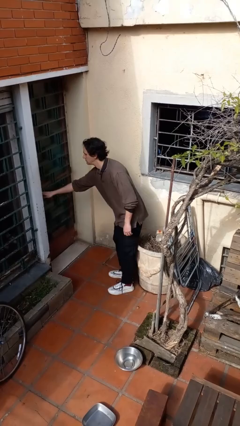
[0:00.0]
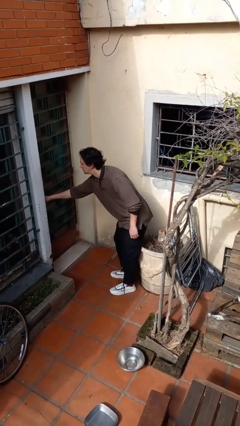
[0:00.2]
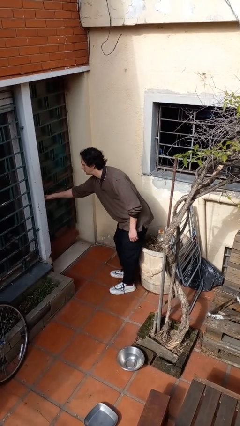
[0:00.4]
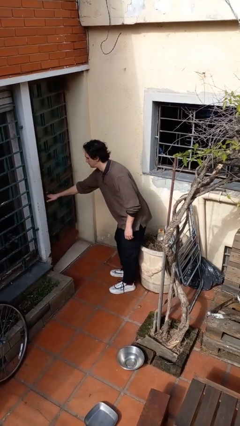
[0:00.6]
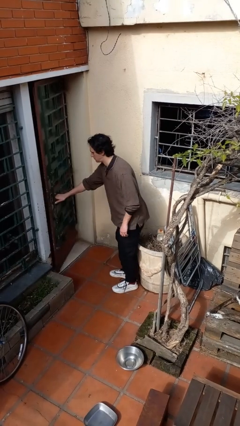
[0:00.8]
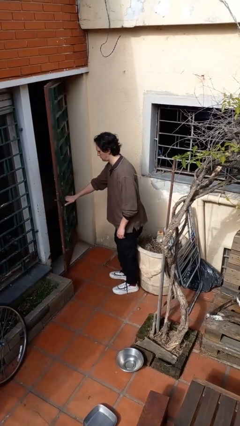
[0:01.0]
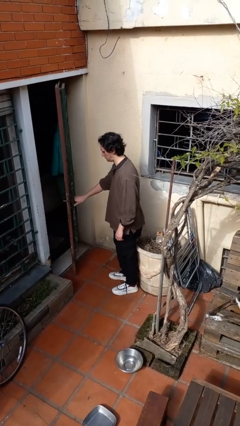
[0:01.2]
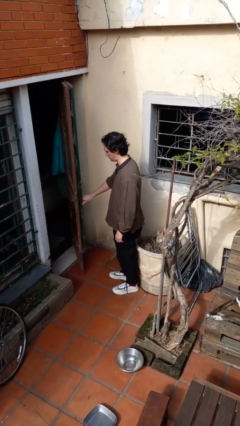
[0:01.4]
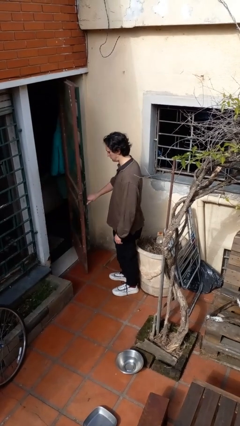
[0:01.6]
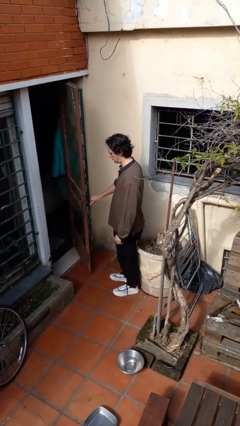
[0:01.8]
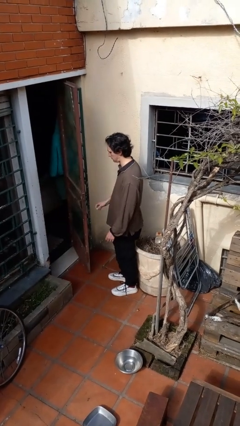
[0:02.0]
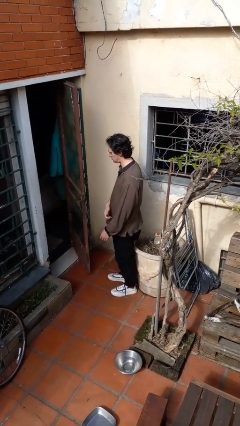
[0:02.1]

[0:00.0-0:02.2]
person opens facility door

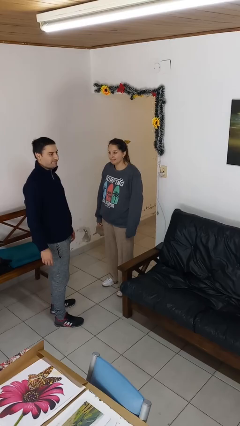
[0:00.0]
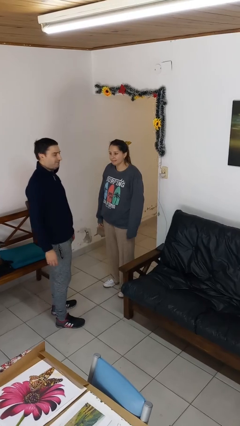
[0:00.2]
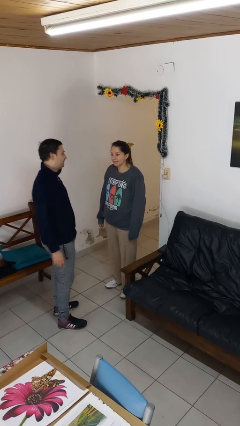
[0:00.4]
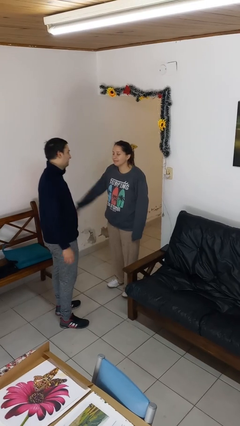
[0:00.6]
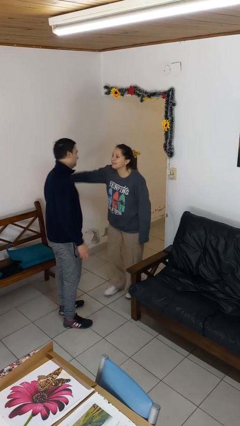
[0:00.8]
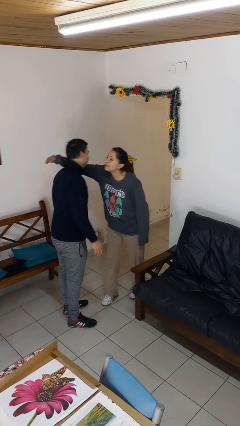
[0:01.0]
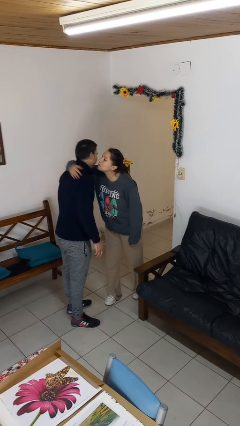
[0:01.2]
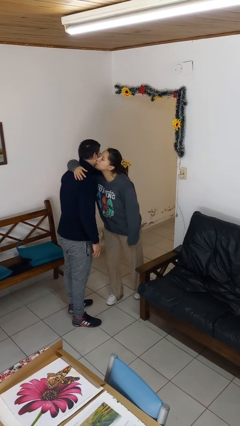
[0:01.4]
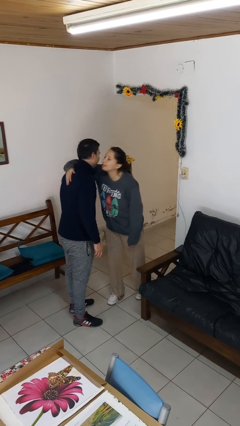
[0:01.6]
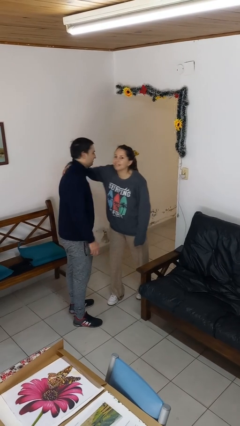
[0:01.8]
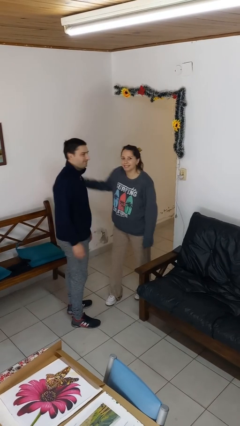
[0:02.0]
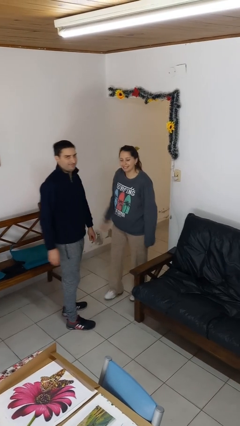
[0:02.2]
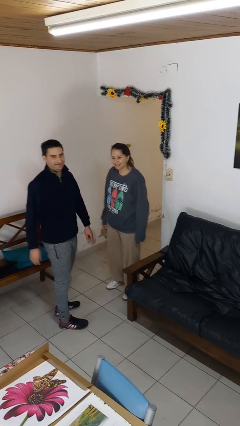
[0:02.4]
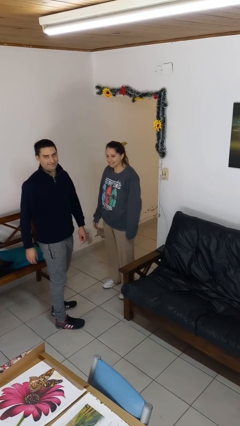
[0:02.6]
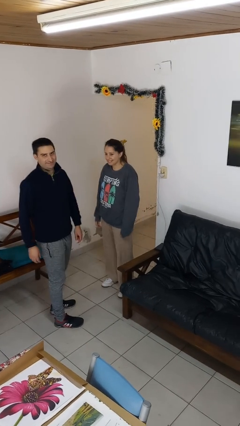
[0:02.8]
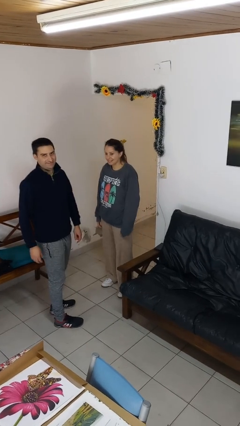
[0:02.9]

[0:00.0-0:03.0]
person kisses cheek of person

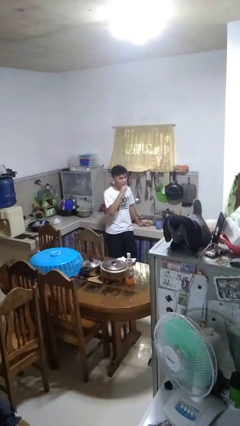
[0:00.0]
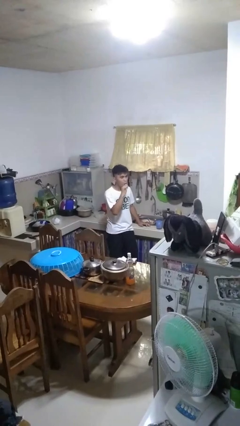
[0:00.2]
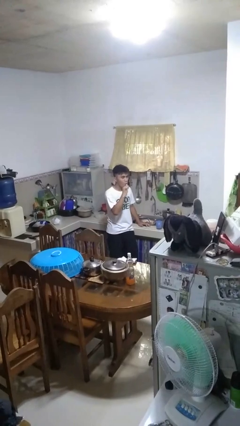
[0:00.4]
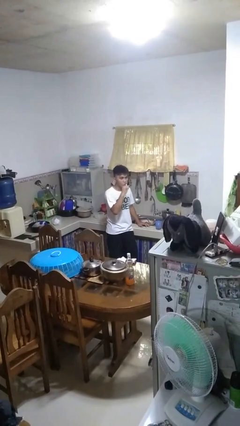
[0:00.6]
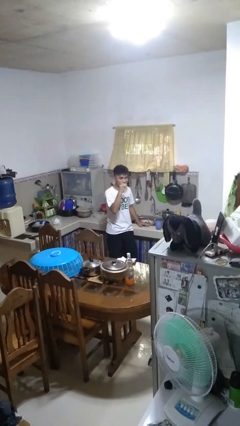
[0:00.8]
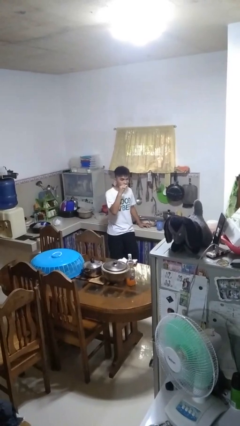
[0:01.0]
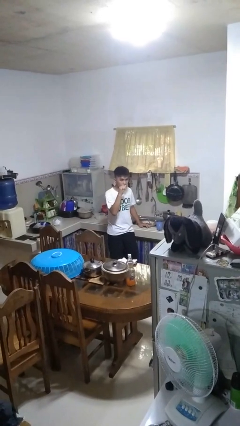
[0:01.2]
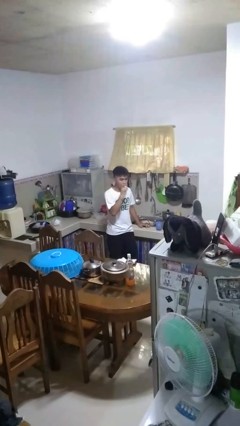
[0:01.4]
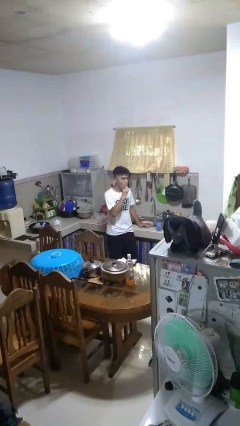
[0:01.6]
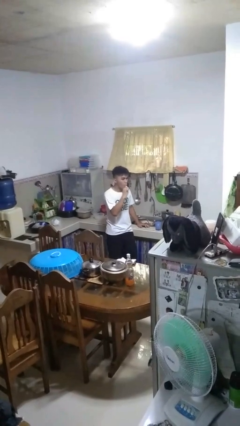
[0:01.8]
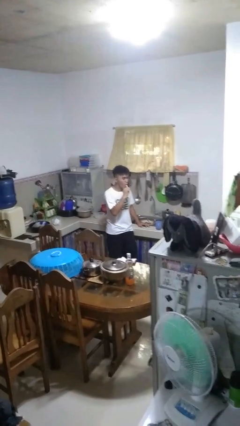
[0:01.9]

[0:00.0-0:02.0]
person brushes teeth

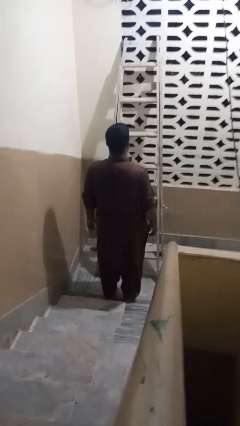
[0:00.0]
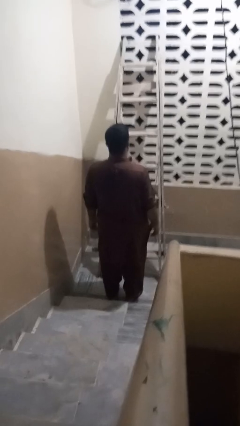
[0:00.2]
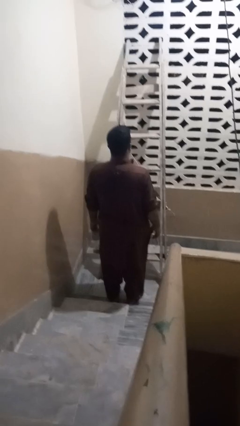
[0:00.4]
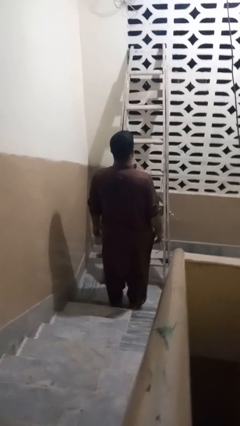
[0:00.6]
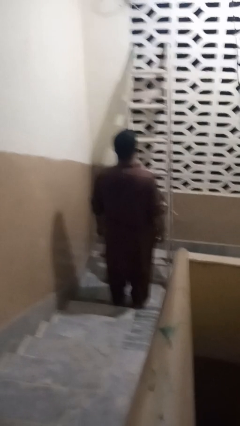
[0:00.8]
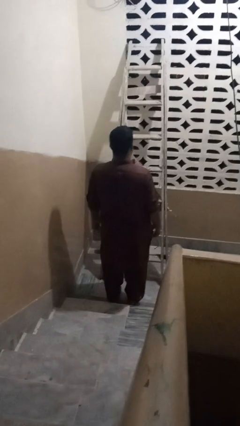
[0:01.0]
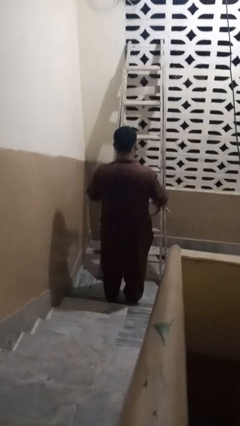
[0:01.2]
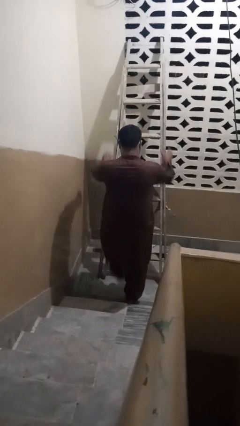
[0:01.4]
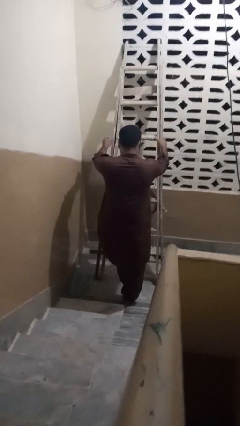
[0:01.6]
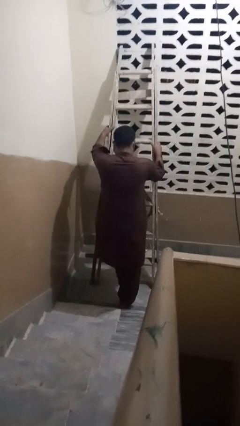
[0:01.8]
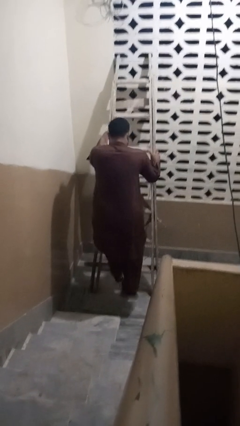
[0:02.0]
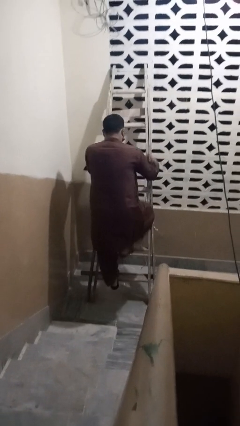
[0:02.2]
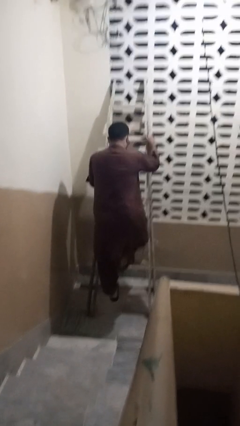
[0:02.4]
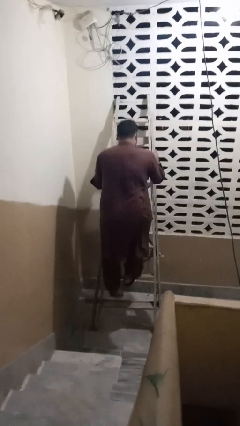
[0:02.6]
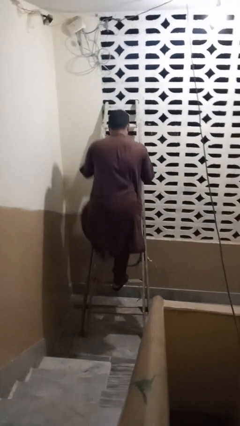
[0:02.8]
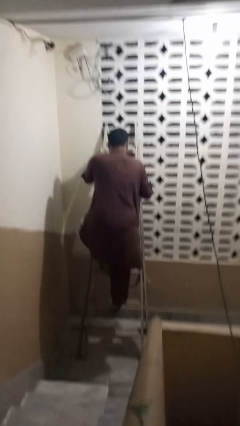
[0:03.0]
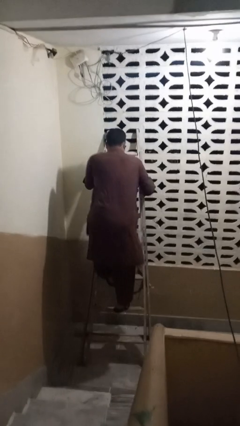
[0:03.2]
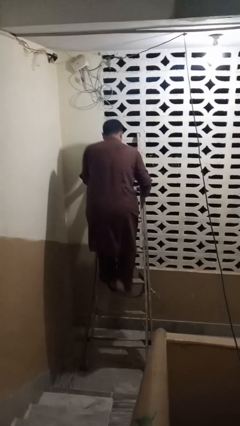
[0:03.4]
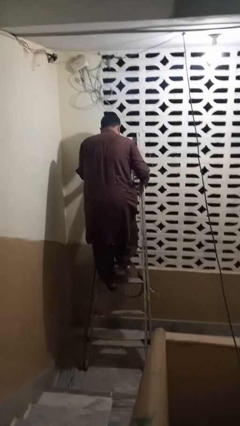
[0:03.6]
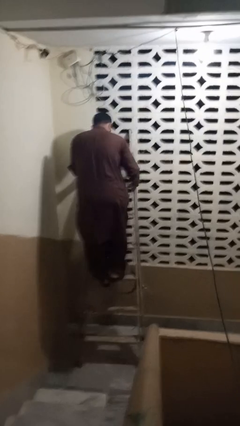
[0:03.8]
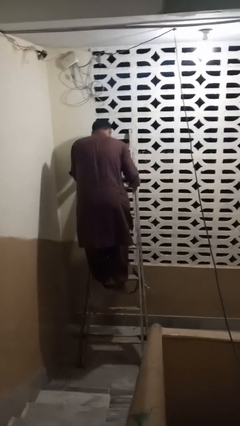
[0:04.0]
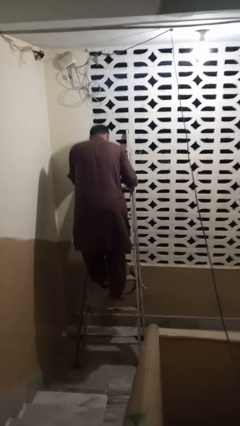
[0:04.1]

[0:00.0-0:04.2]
person climbs up ladder

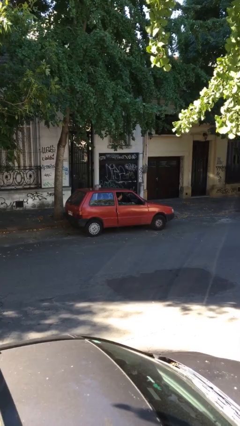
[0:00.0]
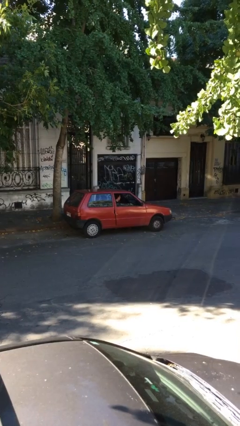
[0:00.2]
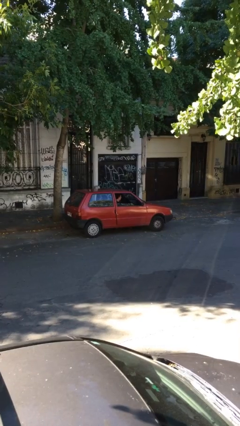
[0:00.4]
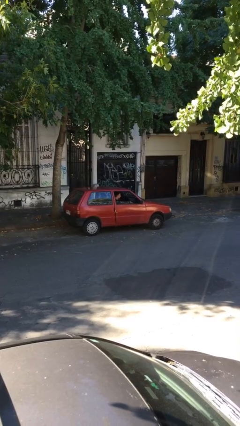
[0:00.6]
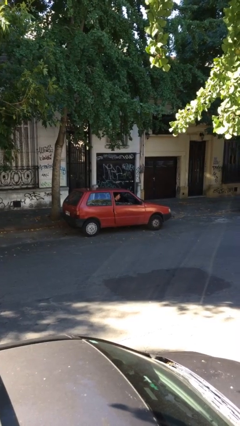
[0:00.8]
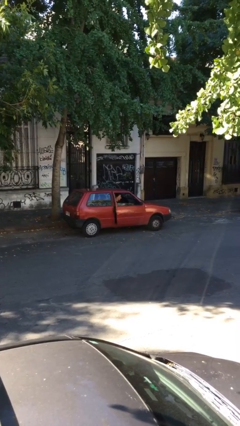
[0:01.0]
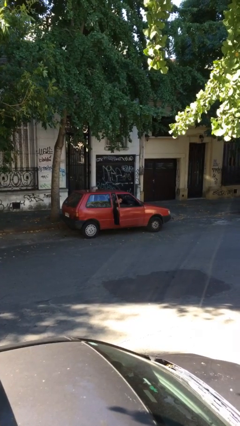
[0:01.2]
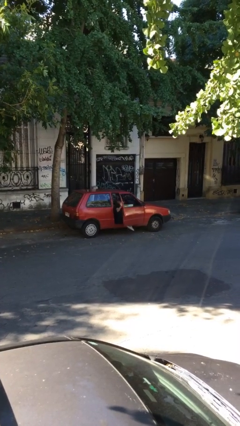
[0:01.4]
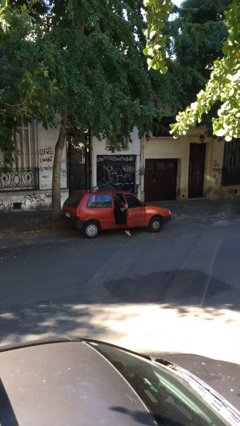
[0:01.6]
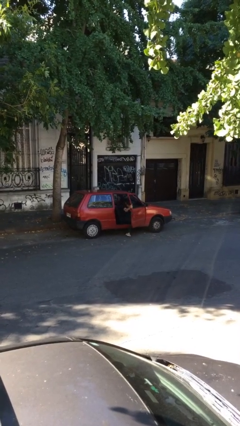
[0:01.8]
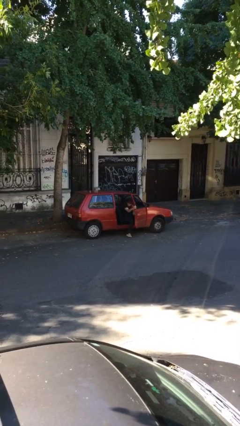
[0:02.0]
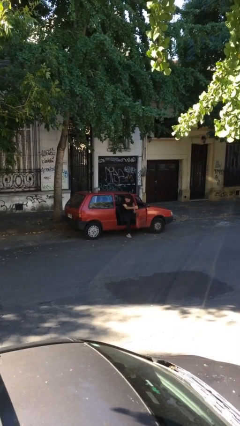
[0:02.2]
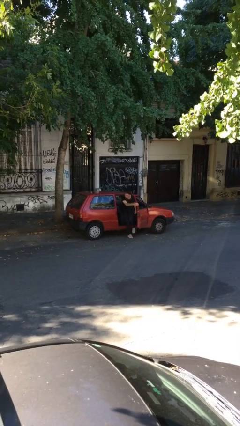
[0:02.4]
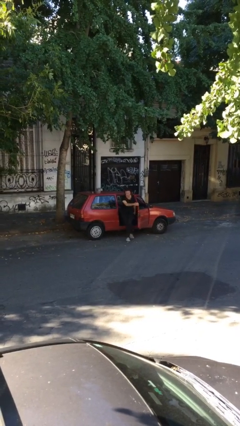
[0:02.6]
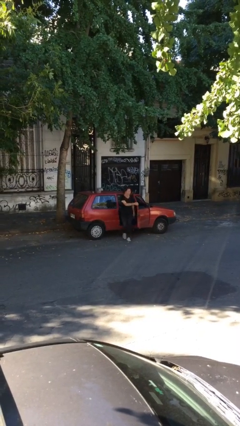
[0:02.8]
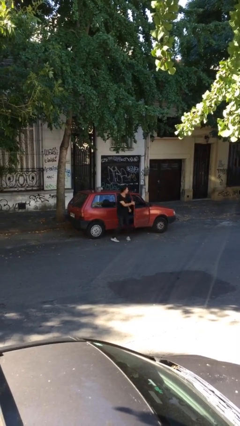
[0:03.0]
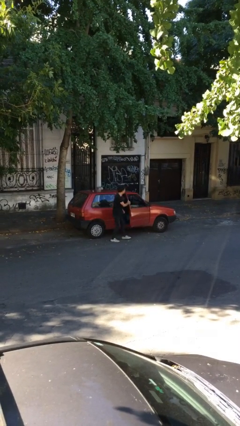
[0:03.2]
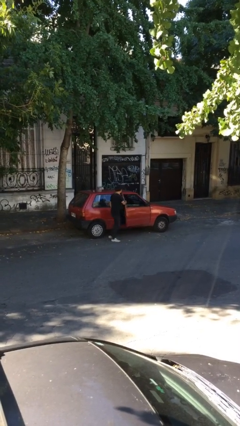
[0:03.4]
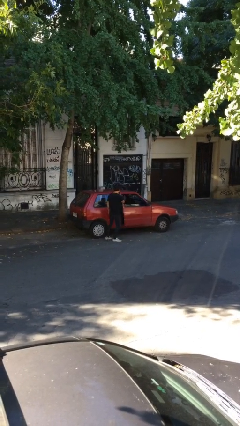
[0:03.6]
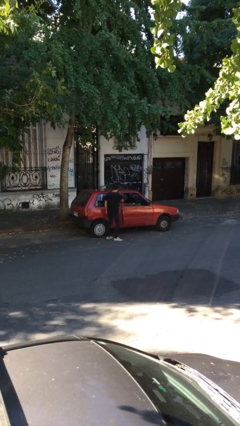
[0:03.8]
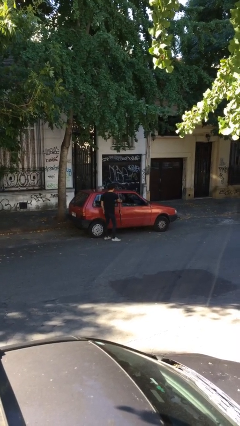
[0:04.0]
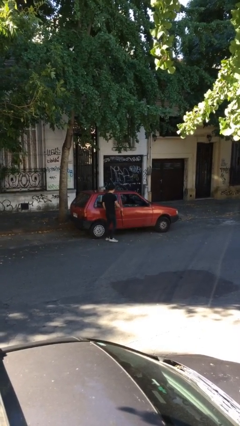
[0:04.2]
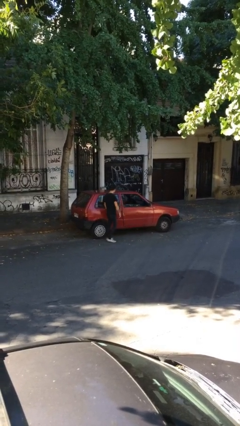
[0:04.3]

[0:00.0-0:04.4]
car drops off person

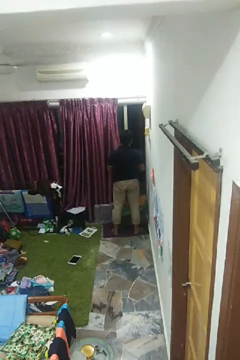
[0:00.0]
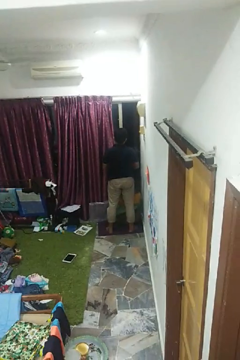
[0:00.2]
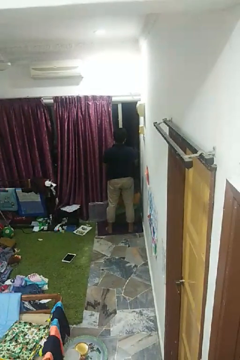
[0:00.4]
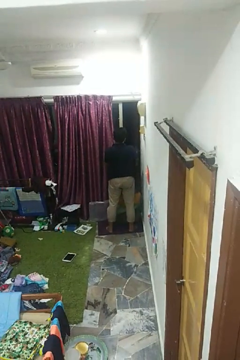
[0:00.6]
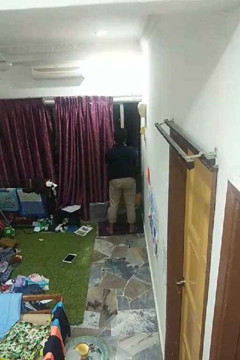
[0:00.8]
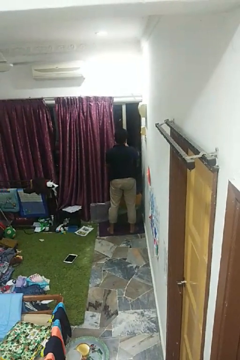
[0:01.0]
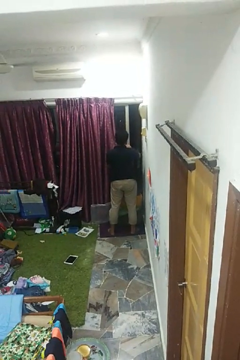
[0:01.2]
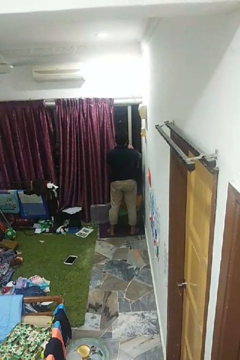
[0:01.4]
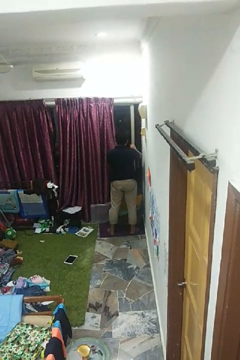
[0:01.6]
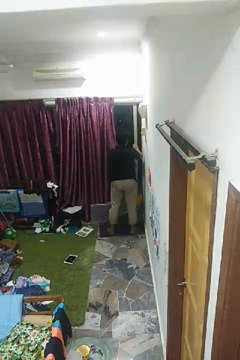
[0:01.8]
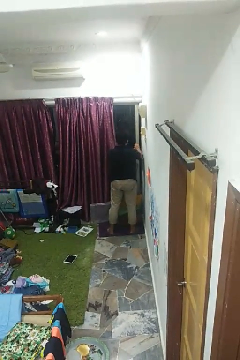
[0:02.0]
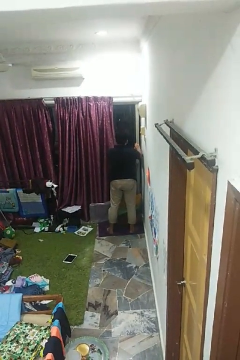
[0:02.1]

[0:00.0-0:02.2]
person closes home window
